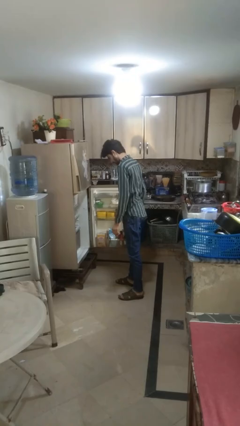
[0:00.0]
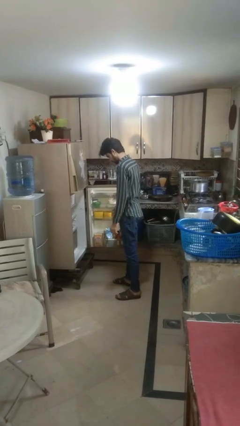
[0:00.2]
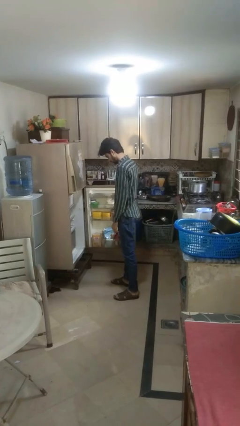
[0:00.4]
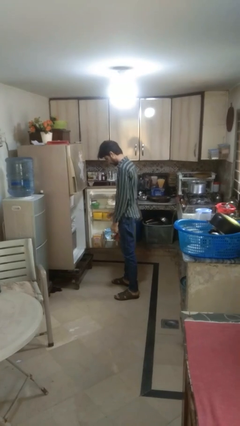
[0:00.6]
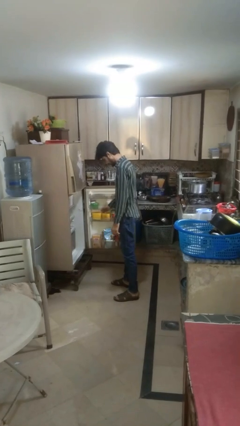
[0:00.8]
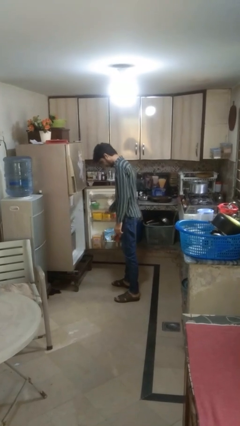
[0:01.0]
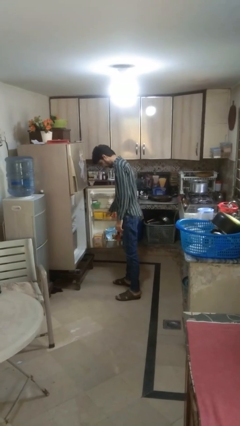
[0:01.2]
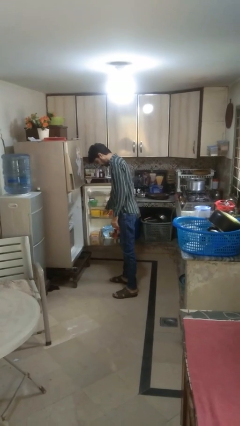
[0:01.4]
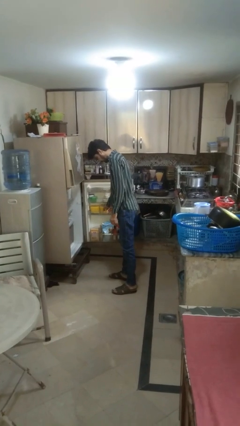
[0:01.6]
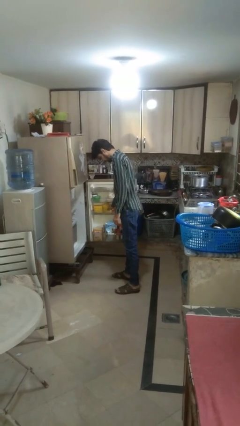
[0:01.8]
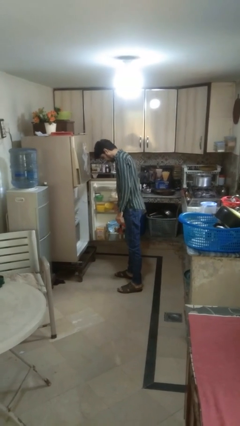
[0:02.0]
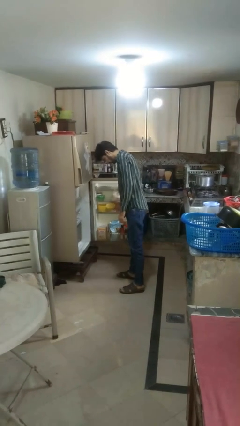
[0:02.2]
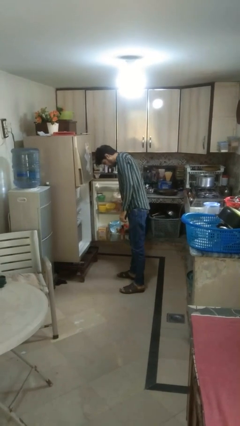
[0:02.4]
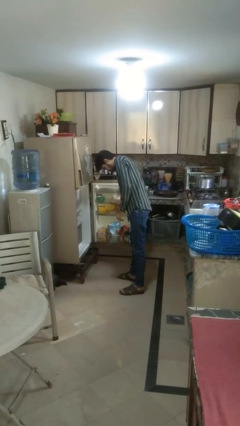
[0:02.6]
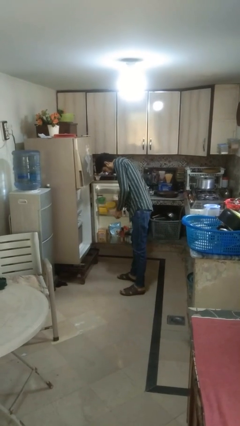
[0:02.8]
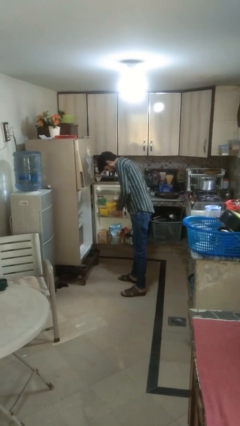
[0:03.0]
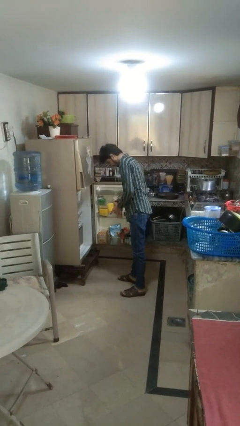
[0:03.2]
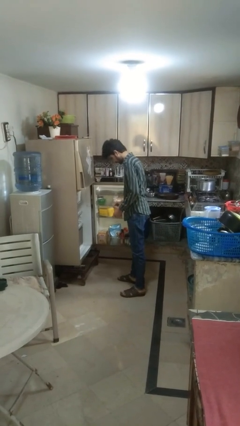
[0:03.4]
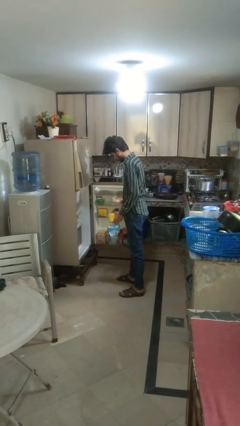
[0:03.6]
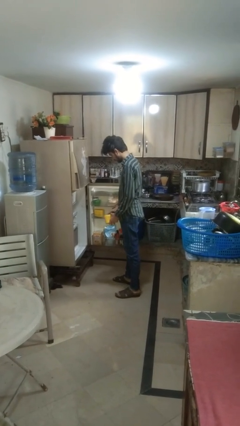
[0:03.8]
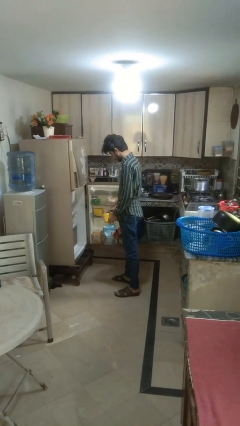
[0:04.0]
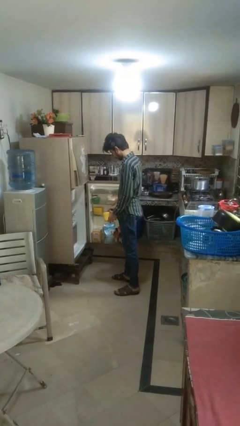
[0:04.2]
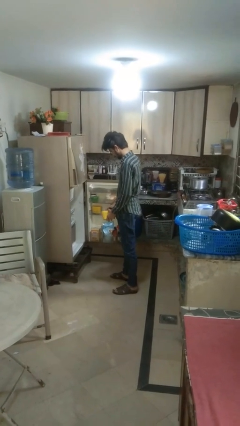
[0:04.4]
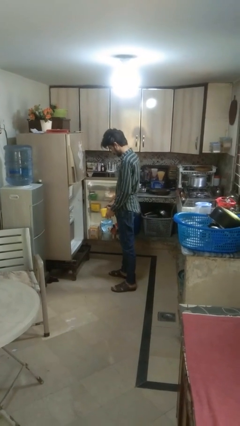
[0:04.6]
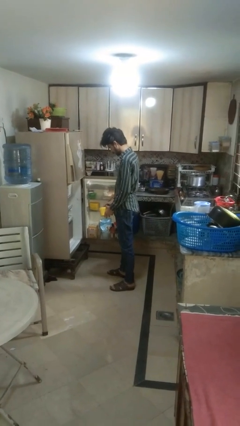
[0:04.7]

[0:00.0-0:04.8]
person takes object from refrigerator

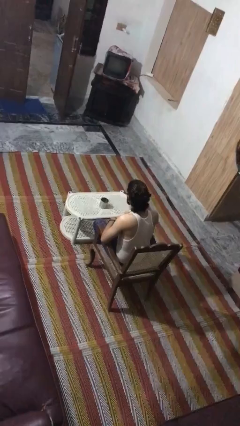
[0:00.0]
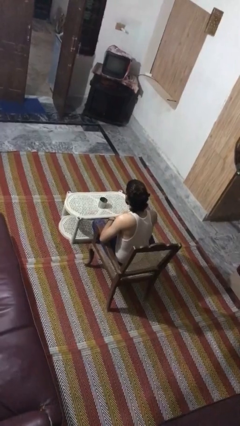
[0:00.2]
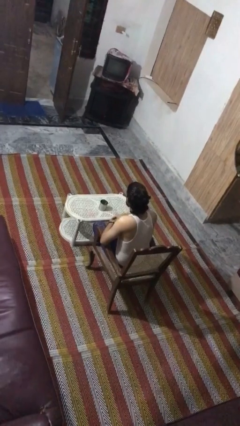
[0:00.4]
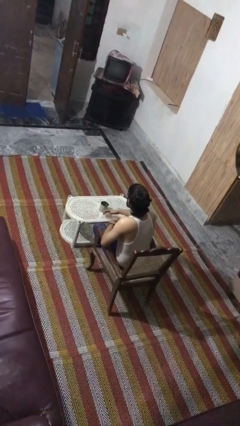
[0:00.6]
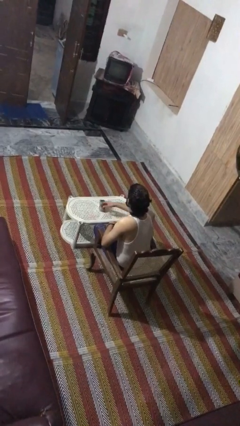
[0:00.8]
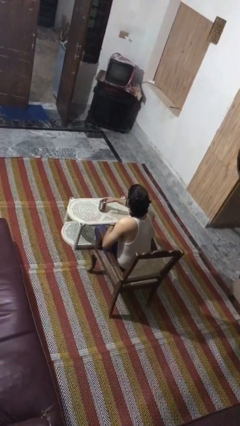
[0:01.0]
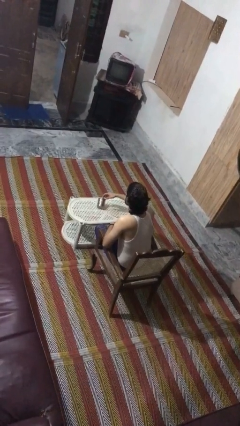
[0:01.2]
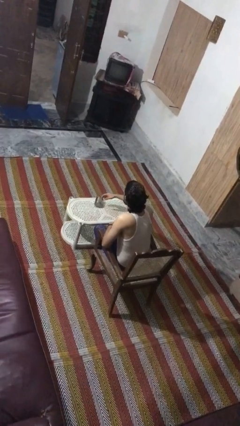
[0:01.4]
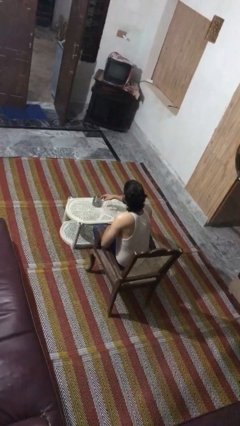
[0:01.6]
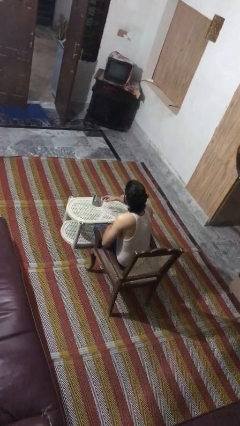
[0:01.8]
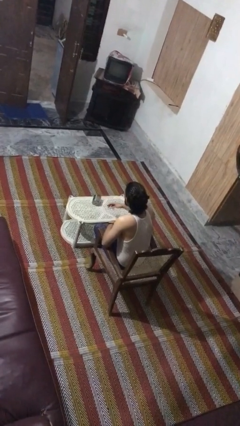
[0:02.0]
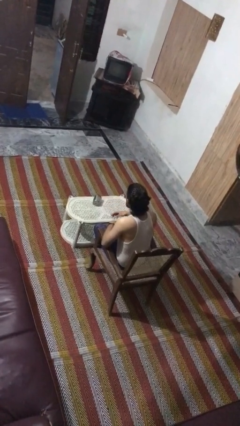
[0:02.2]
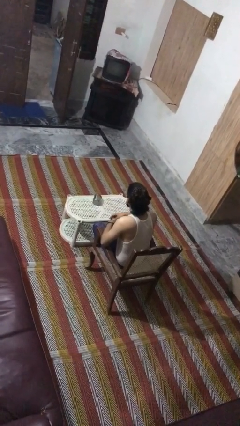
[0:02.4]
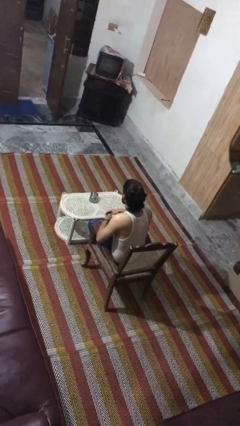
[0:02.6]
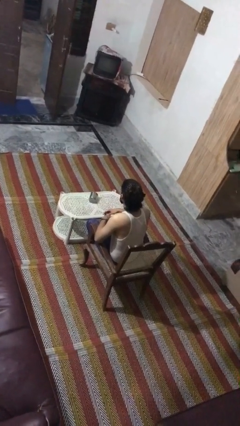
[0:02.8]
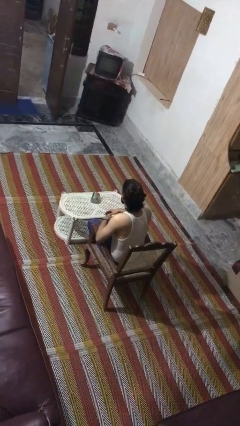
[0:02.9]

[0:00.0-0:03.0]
person knocks over glass

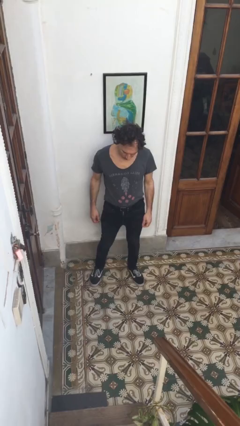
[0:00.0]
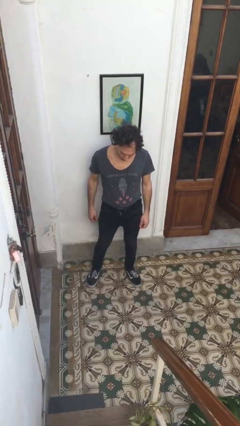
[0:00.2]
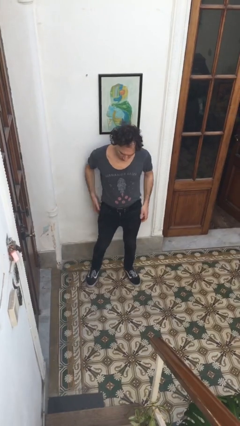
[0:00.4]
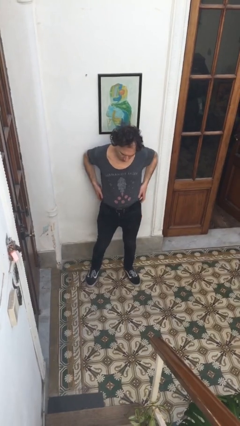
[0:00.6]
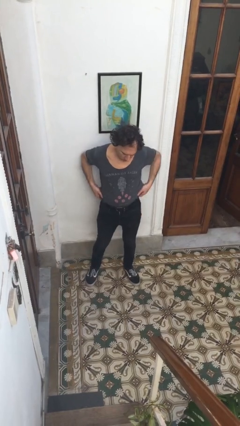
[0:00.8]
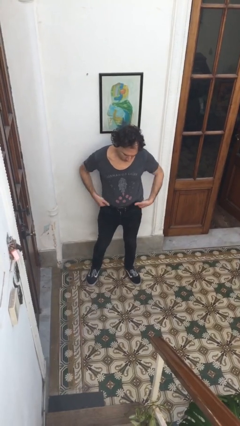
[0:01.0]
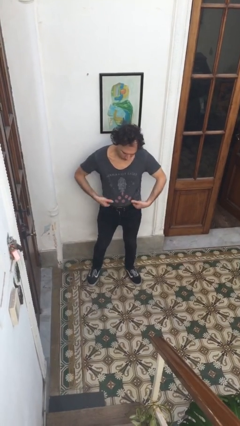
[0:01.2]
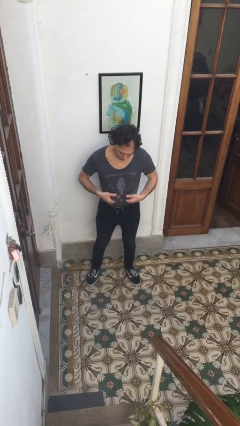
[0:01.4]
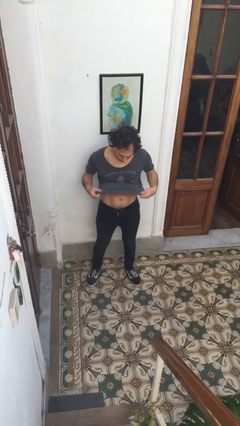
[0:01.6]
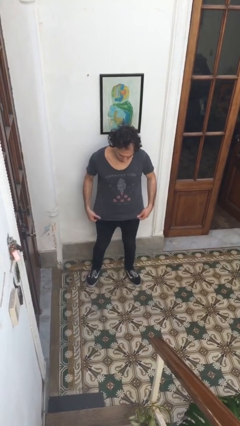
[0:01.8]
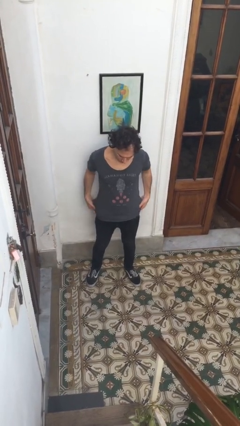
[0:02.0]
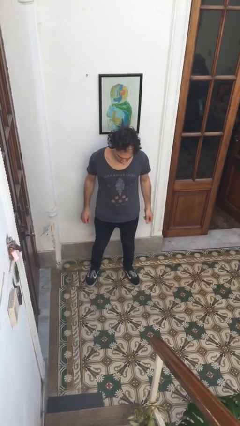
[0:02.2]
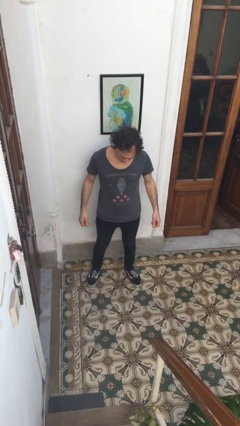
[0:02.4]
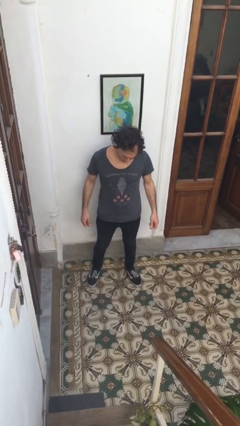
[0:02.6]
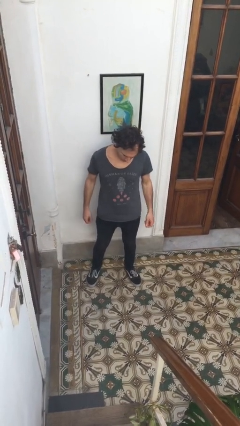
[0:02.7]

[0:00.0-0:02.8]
person untucks shirt

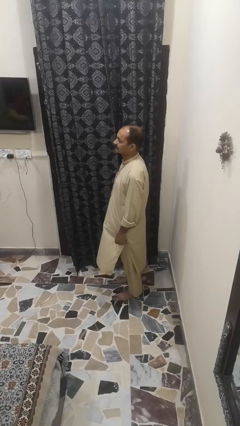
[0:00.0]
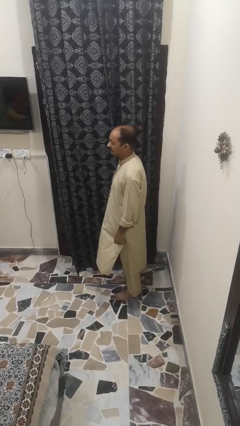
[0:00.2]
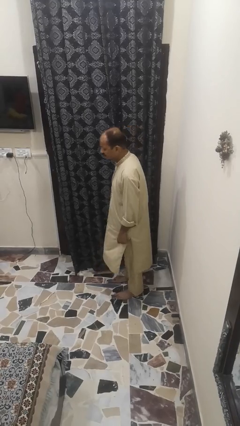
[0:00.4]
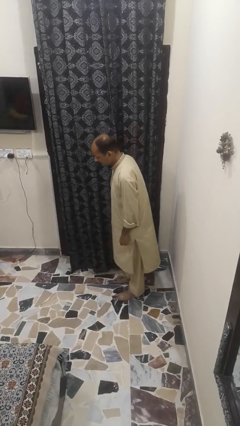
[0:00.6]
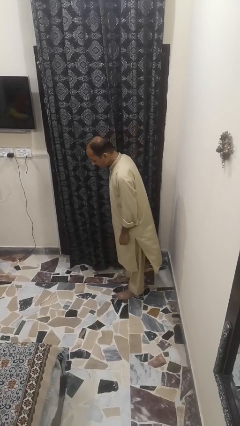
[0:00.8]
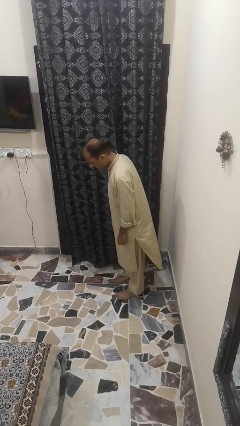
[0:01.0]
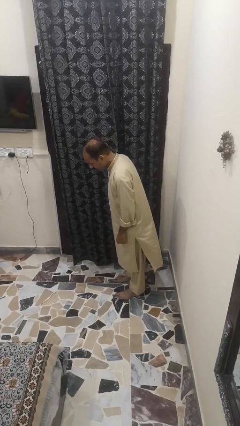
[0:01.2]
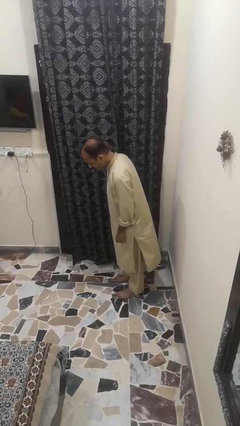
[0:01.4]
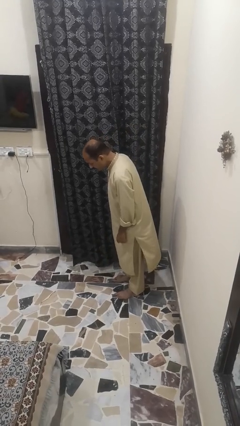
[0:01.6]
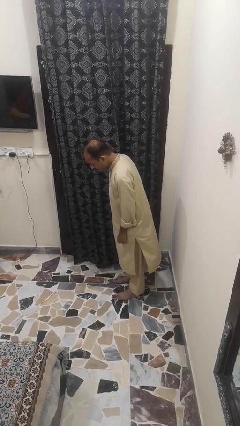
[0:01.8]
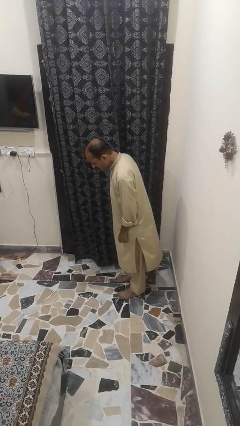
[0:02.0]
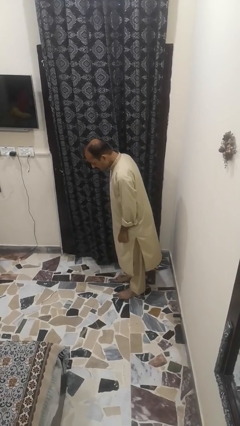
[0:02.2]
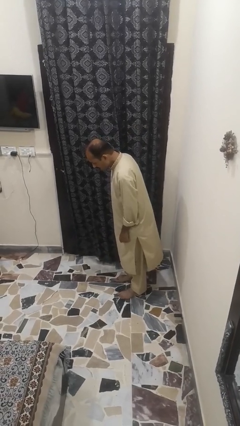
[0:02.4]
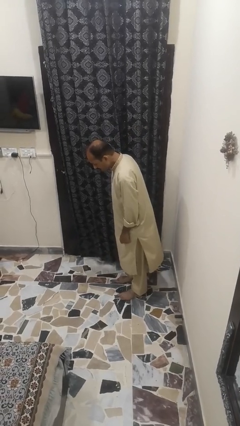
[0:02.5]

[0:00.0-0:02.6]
person bows

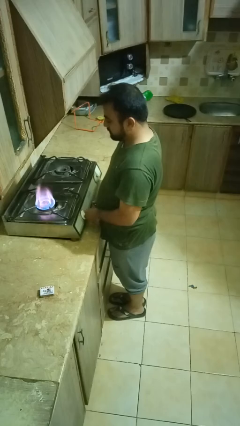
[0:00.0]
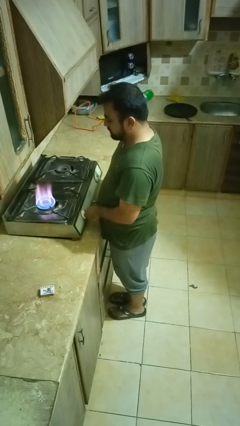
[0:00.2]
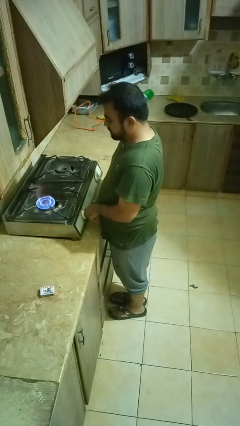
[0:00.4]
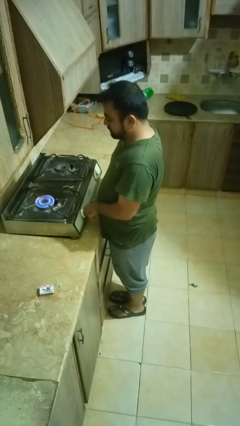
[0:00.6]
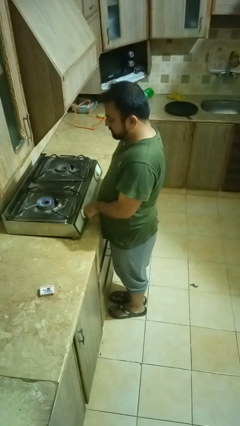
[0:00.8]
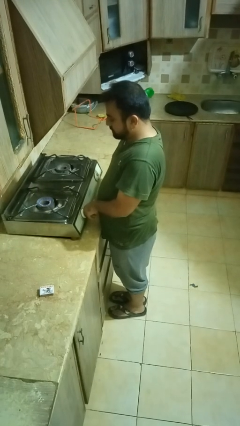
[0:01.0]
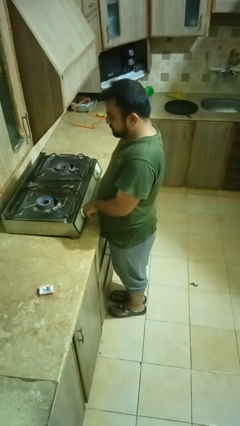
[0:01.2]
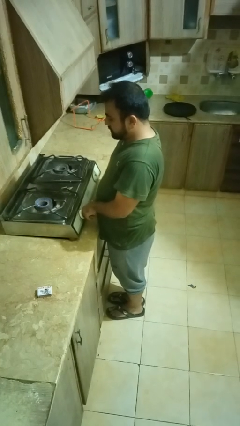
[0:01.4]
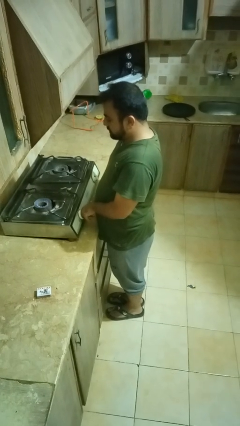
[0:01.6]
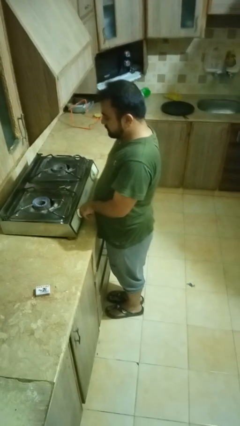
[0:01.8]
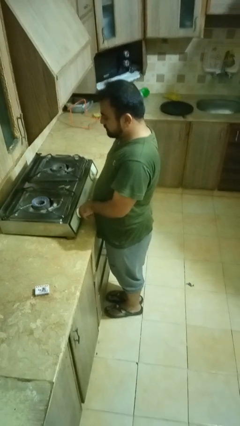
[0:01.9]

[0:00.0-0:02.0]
person turns off stovetop

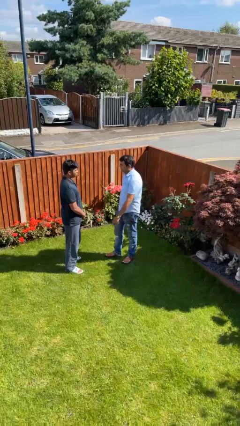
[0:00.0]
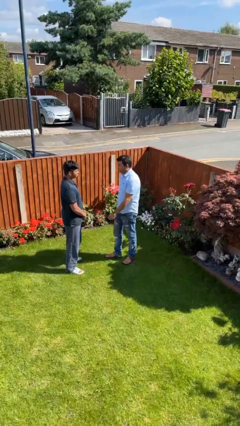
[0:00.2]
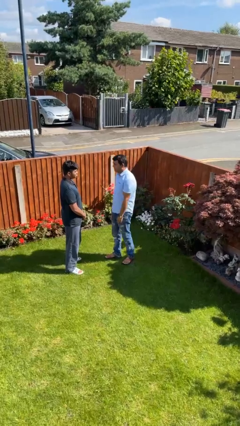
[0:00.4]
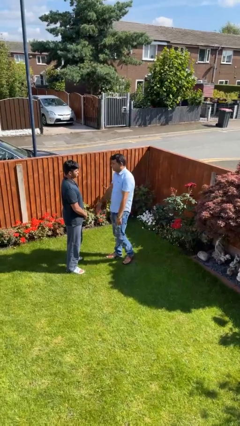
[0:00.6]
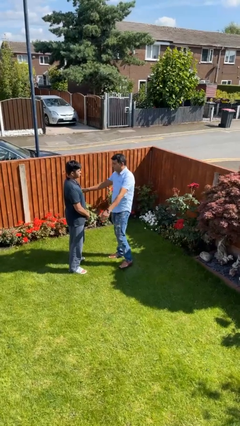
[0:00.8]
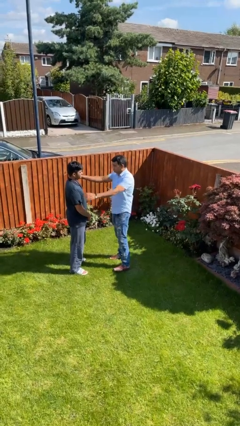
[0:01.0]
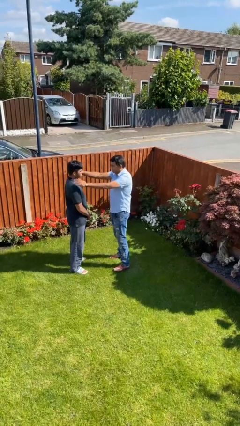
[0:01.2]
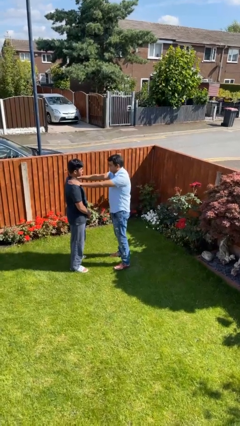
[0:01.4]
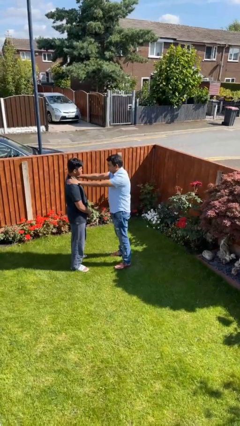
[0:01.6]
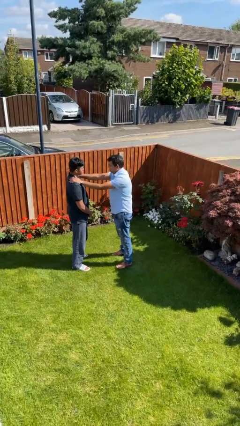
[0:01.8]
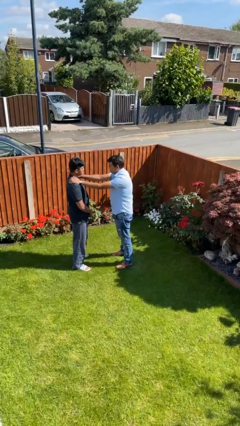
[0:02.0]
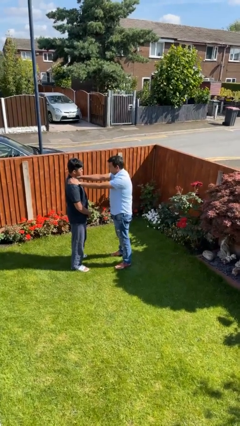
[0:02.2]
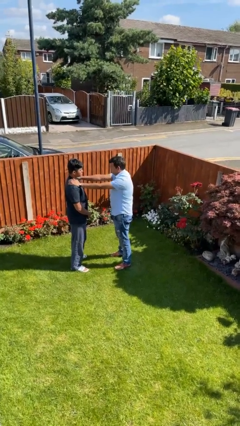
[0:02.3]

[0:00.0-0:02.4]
person pounds shoulders of person
